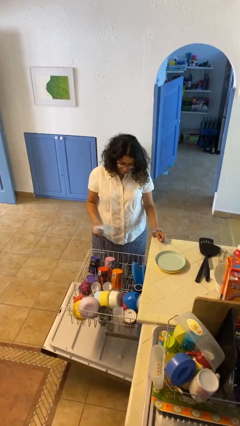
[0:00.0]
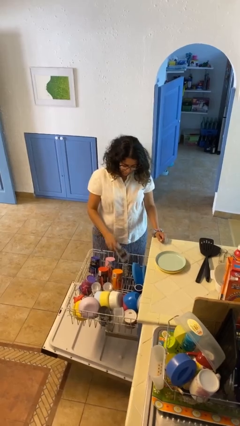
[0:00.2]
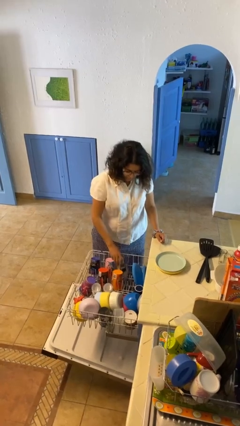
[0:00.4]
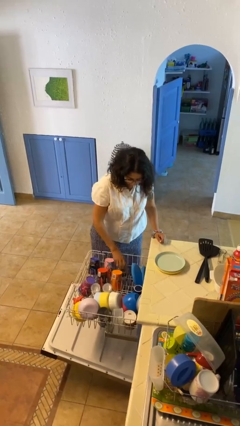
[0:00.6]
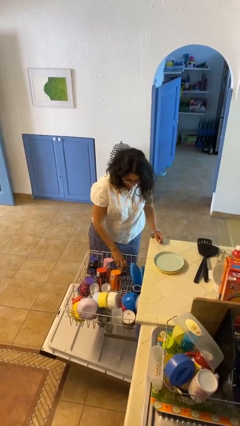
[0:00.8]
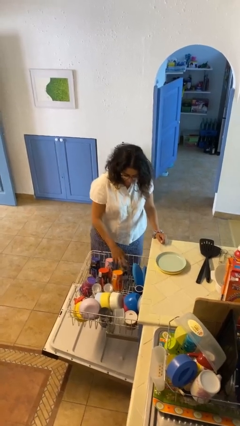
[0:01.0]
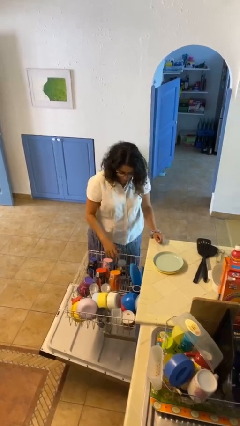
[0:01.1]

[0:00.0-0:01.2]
person loads dishwasher

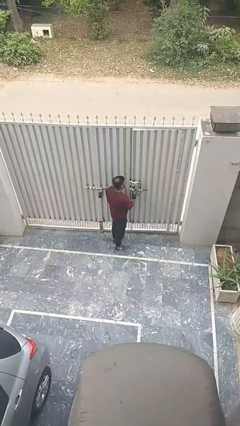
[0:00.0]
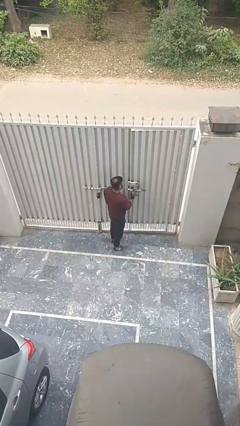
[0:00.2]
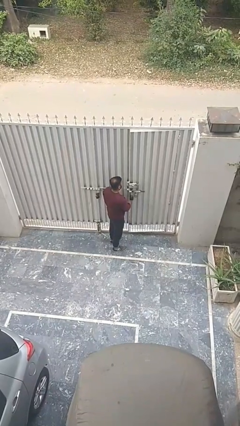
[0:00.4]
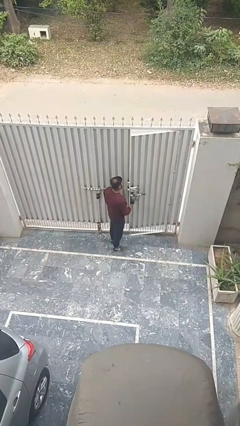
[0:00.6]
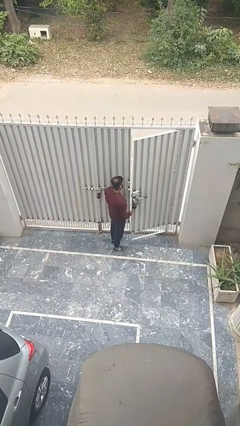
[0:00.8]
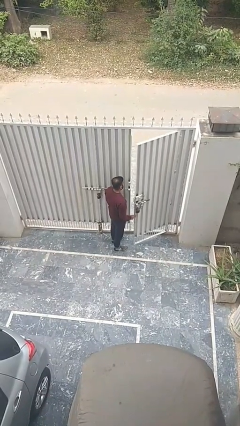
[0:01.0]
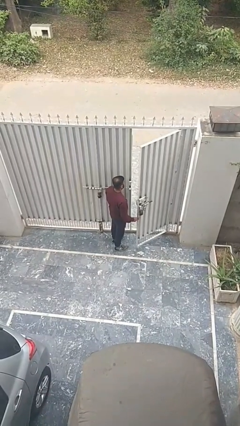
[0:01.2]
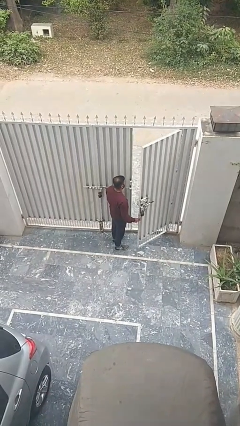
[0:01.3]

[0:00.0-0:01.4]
person opens facility door

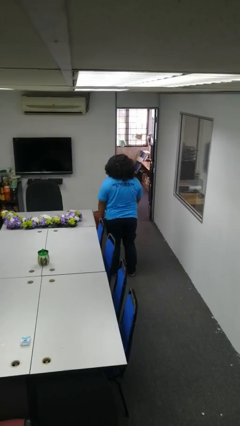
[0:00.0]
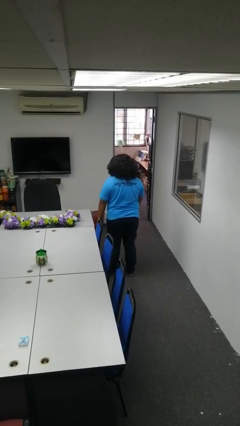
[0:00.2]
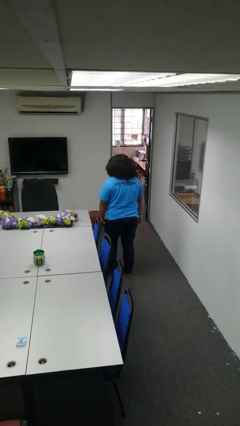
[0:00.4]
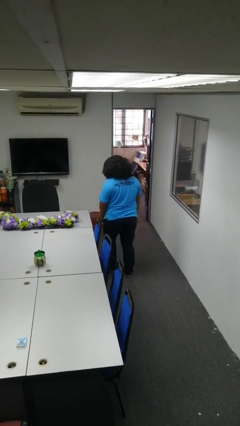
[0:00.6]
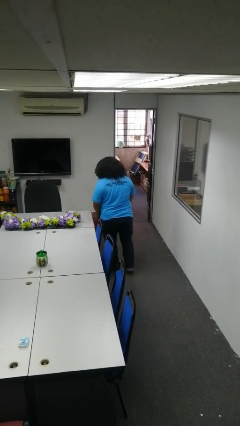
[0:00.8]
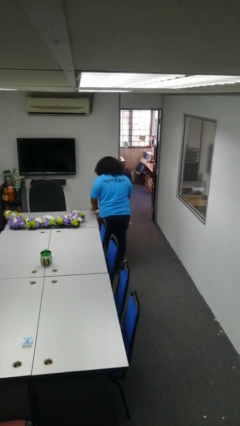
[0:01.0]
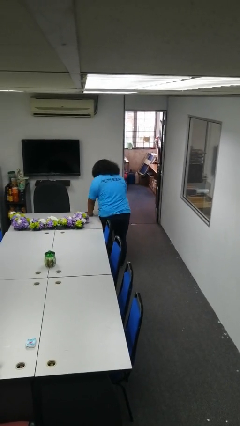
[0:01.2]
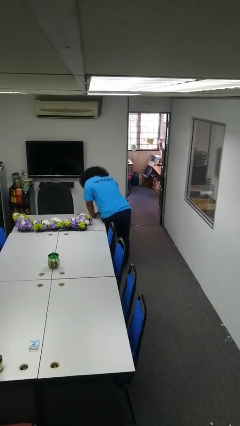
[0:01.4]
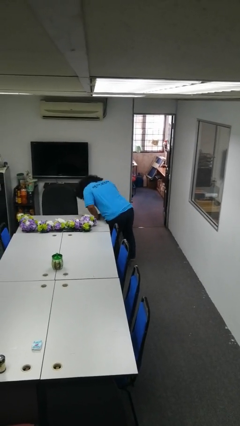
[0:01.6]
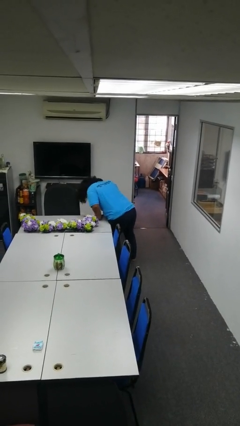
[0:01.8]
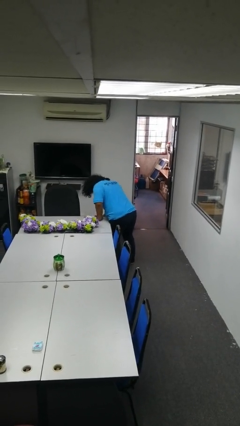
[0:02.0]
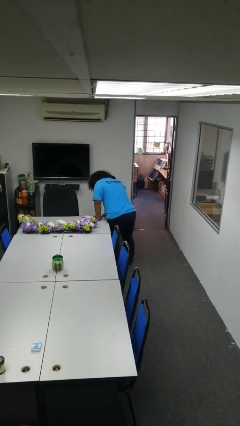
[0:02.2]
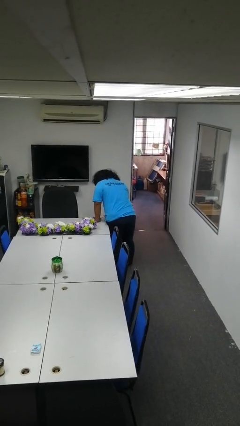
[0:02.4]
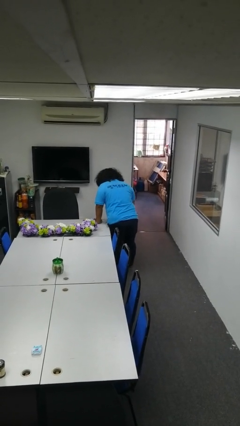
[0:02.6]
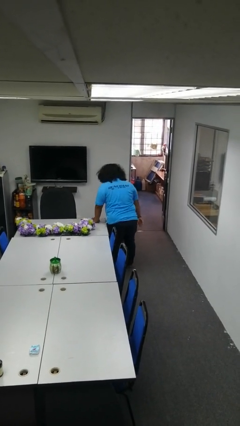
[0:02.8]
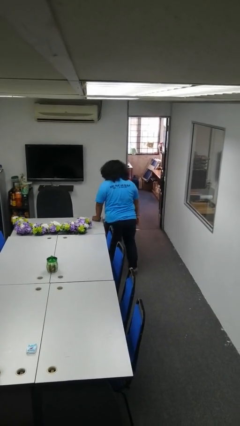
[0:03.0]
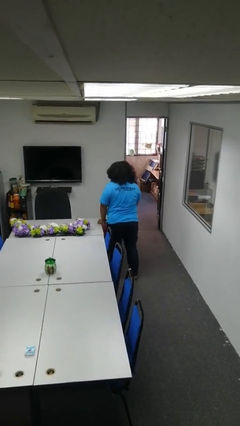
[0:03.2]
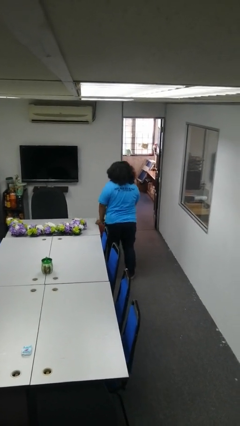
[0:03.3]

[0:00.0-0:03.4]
person bumps into table

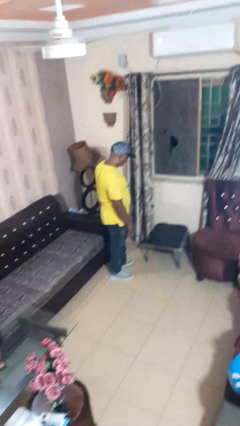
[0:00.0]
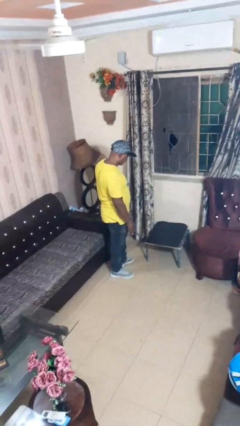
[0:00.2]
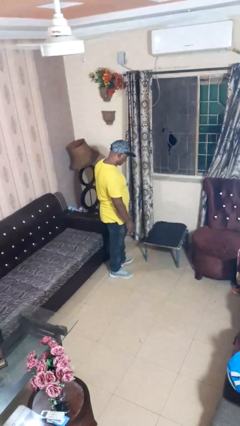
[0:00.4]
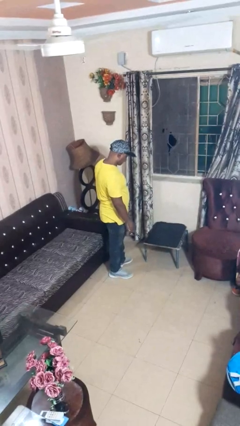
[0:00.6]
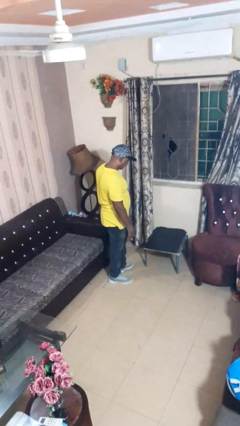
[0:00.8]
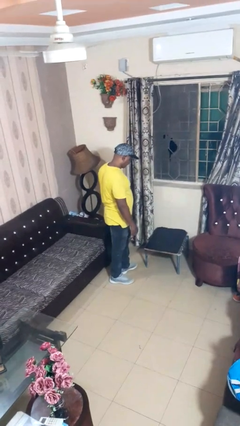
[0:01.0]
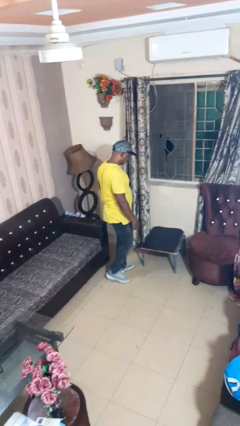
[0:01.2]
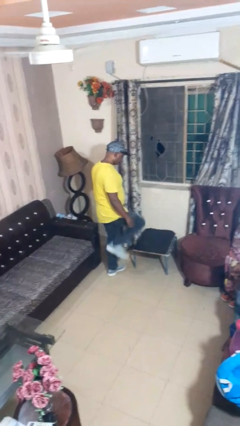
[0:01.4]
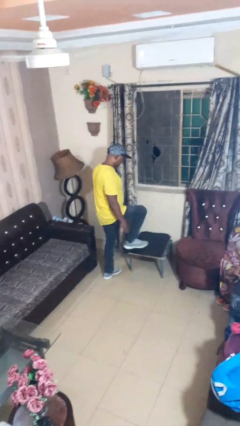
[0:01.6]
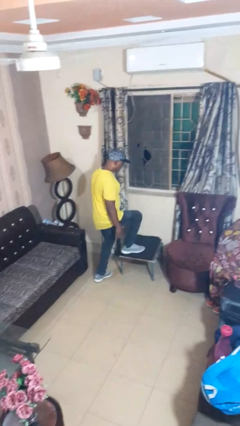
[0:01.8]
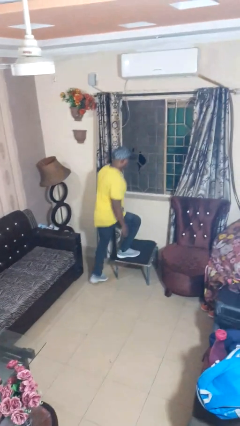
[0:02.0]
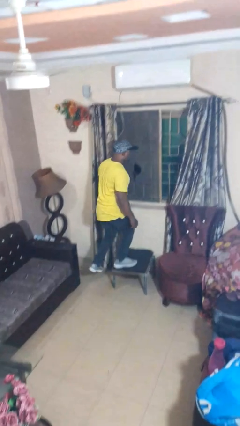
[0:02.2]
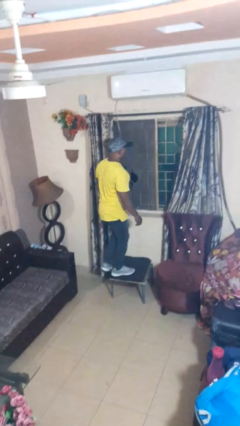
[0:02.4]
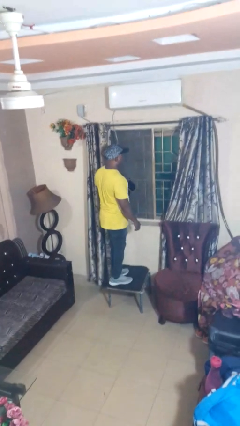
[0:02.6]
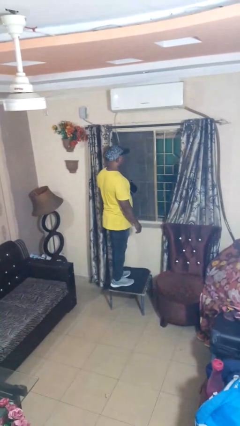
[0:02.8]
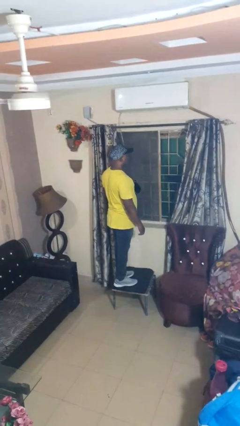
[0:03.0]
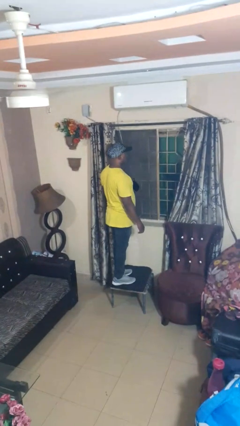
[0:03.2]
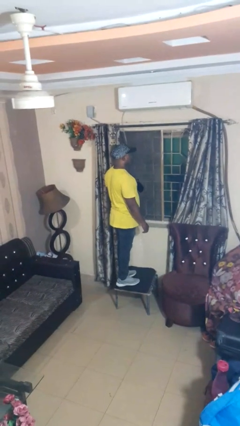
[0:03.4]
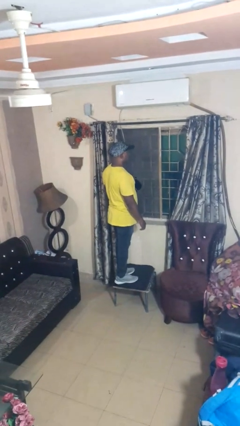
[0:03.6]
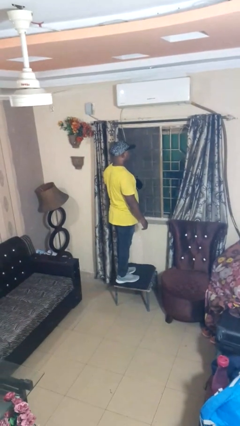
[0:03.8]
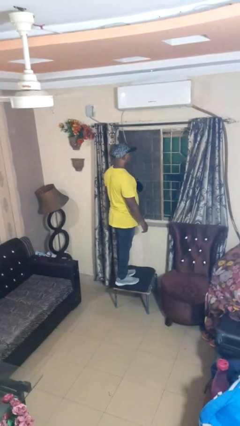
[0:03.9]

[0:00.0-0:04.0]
person climbs on table

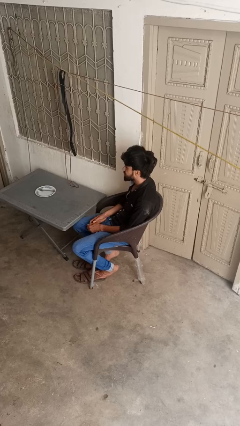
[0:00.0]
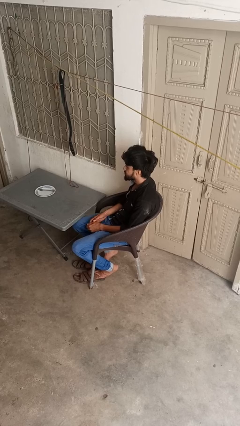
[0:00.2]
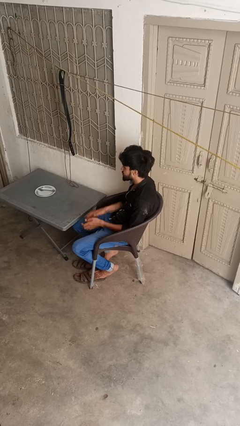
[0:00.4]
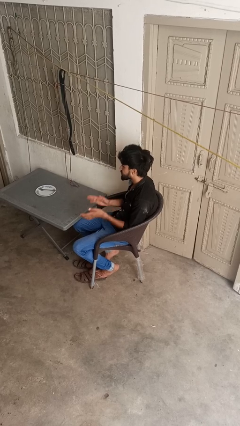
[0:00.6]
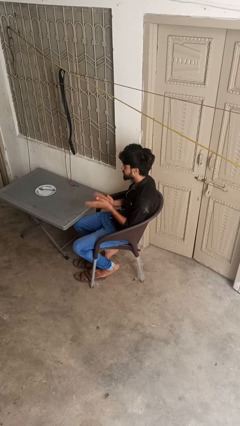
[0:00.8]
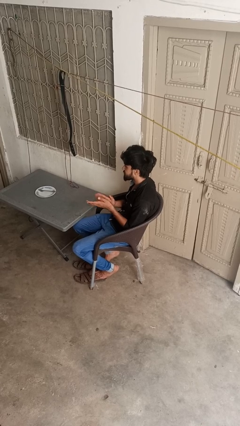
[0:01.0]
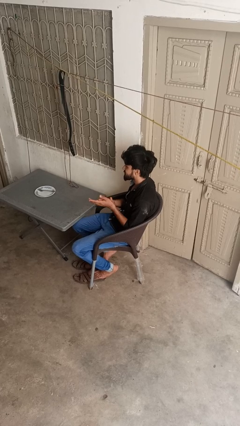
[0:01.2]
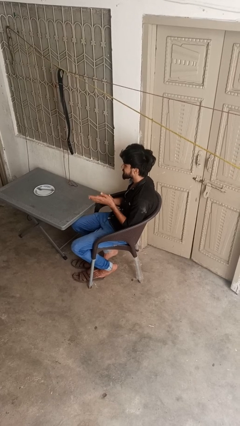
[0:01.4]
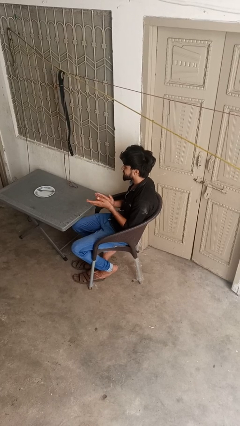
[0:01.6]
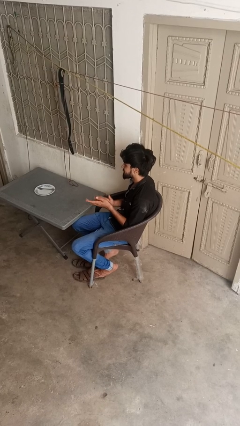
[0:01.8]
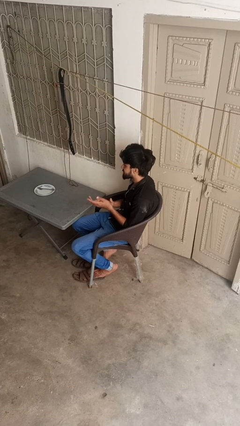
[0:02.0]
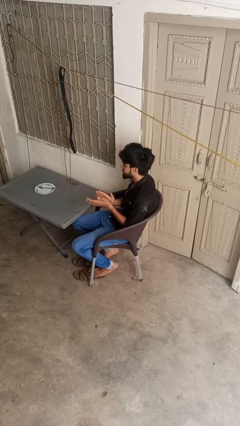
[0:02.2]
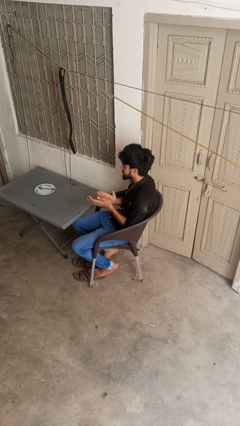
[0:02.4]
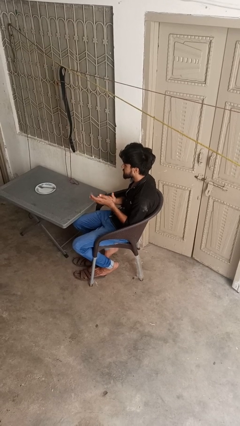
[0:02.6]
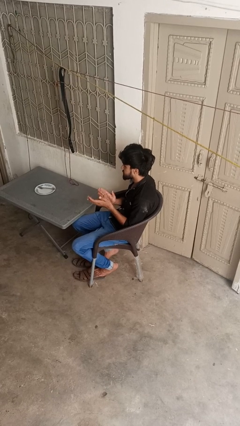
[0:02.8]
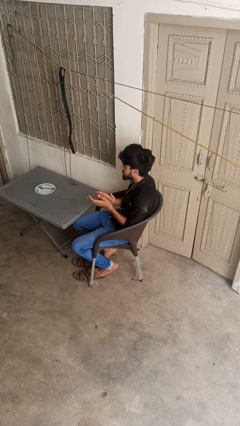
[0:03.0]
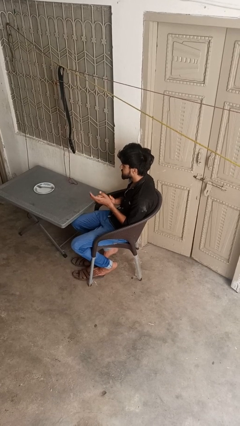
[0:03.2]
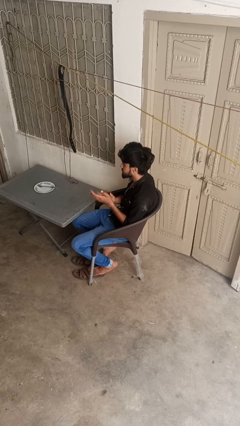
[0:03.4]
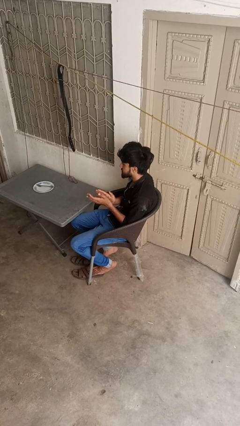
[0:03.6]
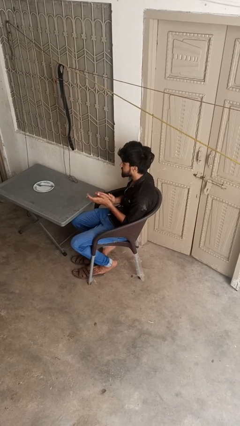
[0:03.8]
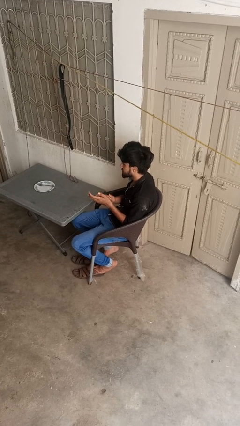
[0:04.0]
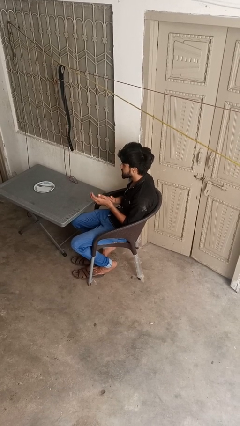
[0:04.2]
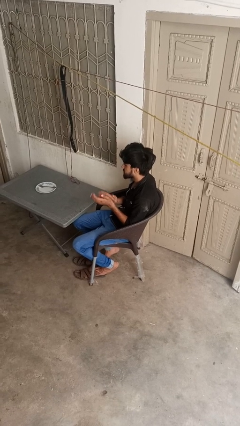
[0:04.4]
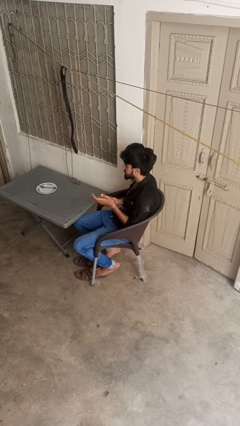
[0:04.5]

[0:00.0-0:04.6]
person claps hands

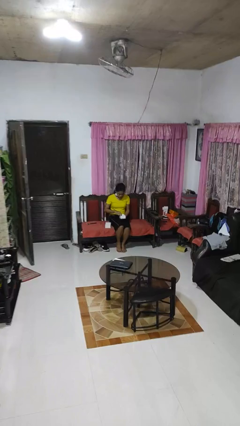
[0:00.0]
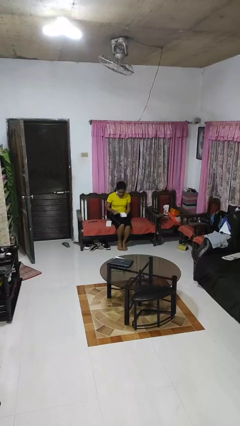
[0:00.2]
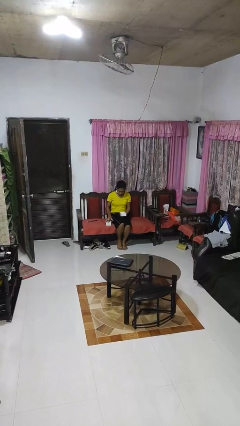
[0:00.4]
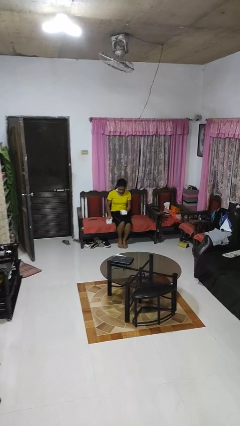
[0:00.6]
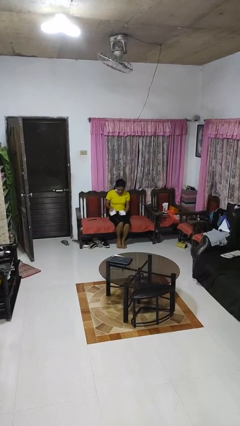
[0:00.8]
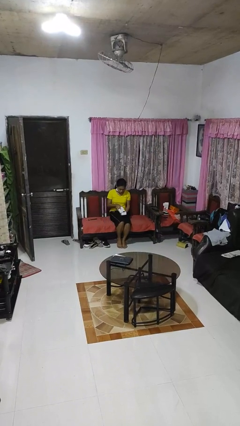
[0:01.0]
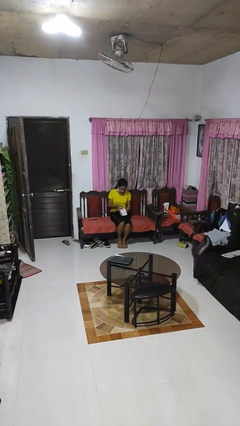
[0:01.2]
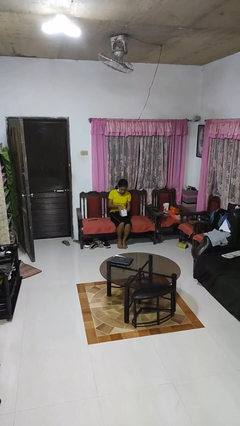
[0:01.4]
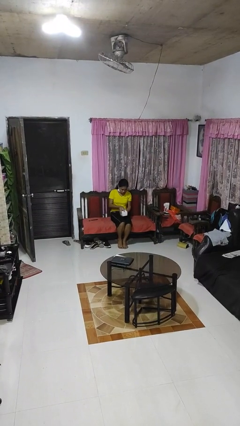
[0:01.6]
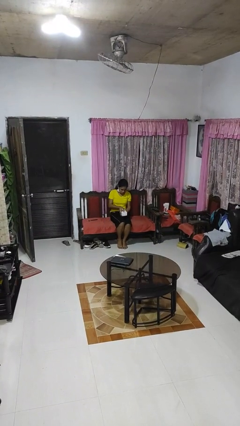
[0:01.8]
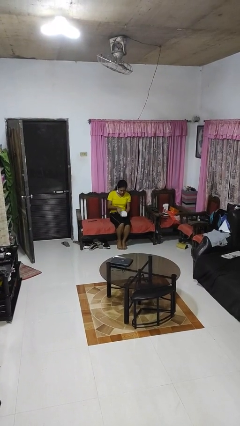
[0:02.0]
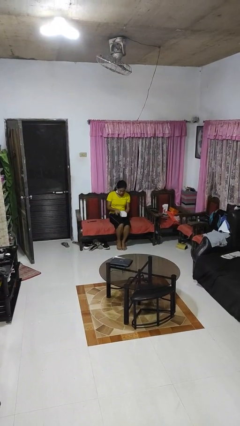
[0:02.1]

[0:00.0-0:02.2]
person closes jewelry box

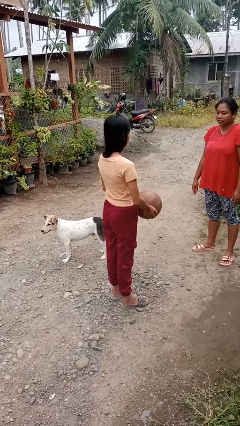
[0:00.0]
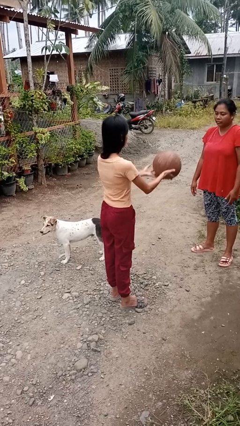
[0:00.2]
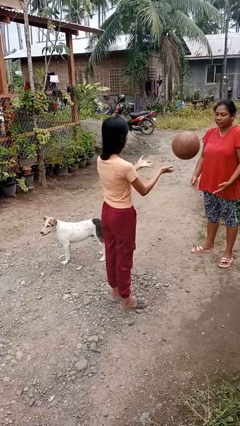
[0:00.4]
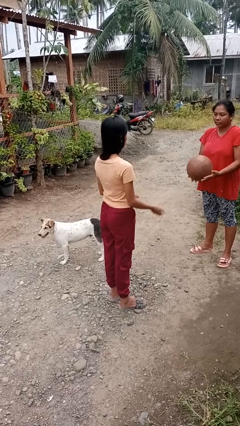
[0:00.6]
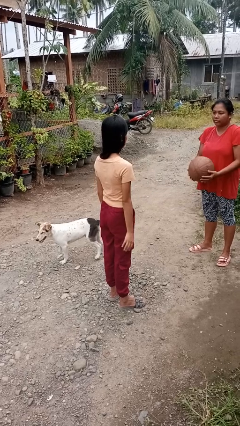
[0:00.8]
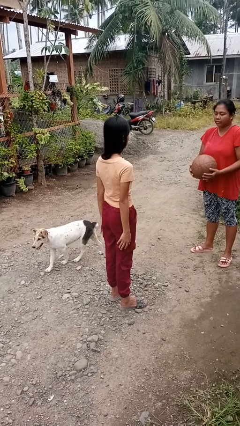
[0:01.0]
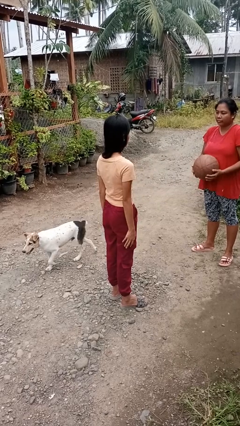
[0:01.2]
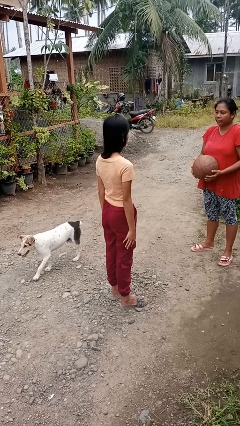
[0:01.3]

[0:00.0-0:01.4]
person throws object to person
